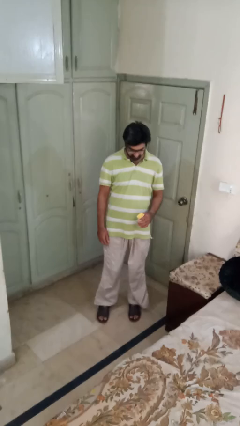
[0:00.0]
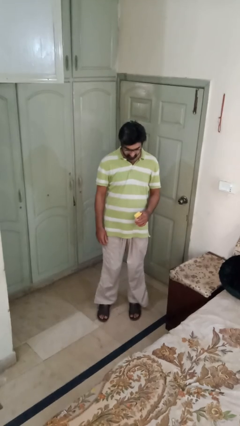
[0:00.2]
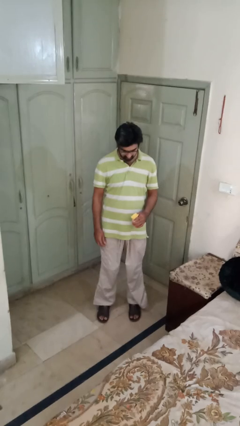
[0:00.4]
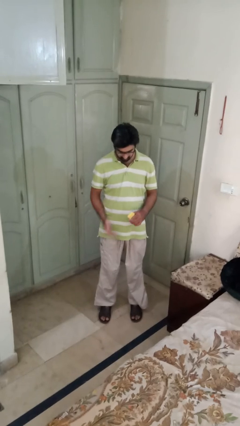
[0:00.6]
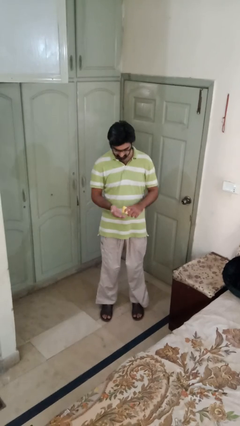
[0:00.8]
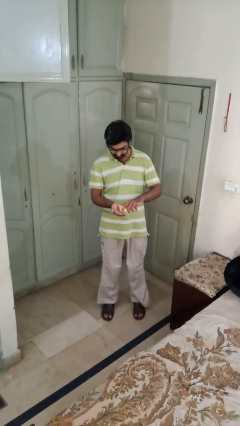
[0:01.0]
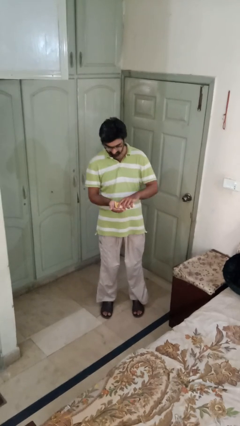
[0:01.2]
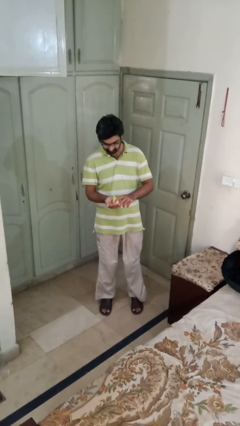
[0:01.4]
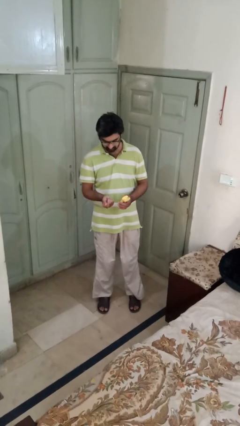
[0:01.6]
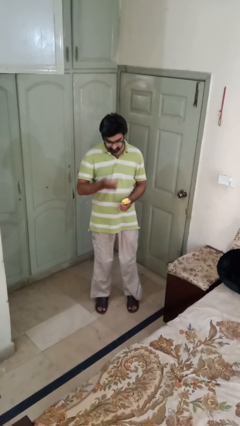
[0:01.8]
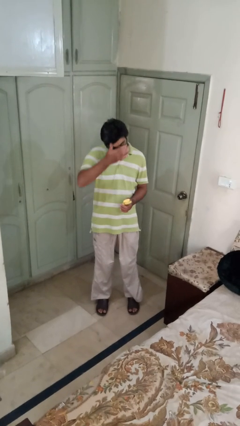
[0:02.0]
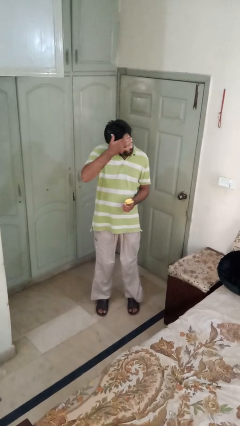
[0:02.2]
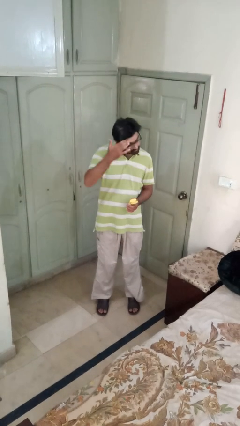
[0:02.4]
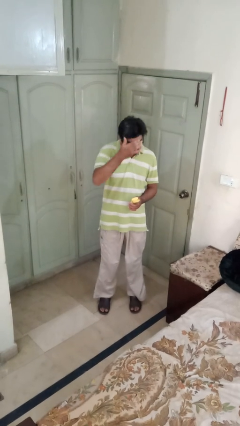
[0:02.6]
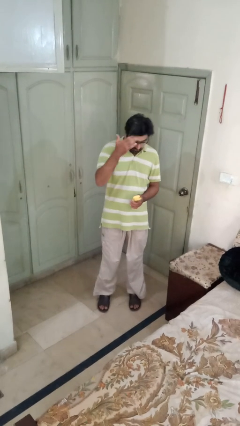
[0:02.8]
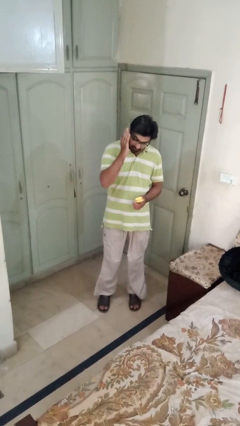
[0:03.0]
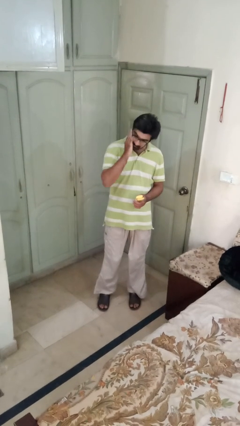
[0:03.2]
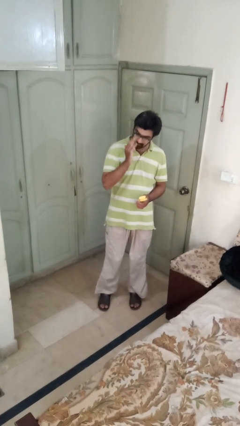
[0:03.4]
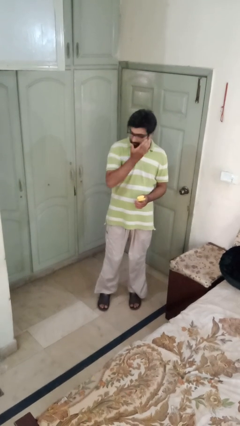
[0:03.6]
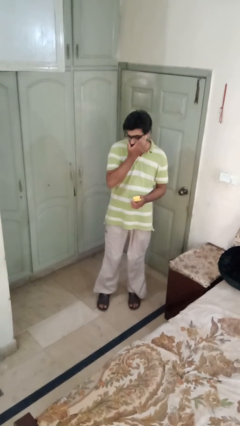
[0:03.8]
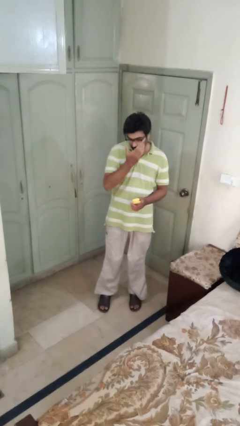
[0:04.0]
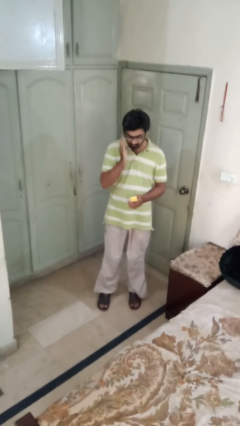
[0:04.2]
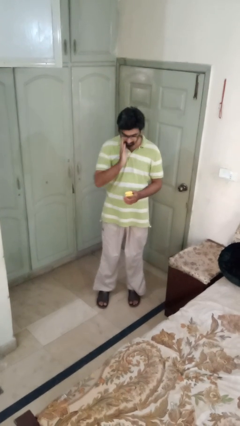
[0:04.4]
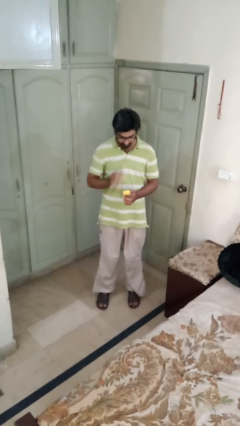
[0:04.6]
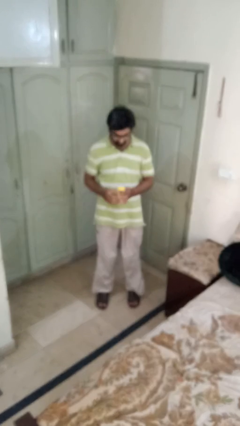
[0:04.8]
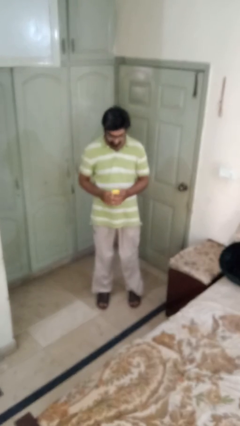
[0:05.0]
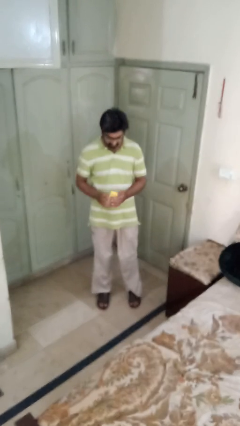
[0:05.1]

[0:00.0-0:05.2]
person applies facial moisturizer

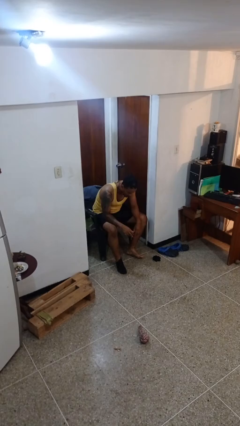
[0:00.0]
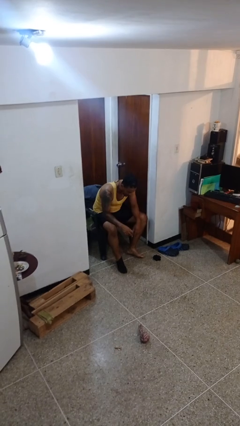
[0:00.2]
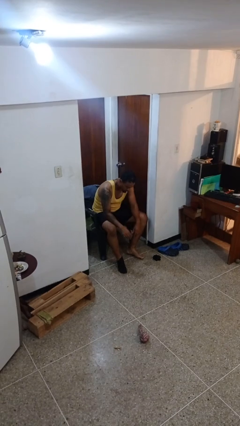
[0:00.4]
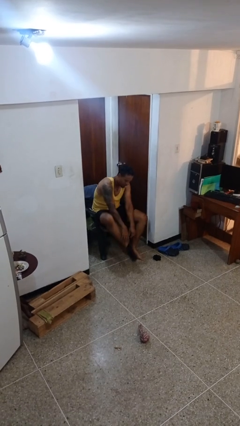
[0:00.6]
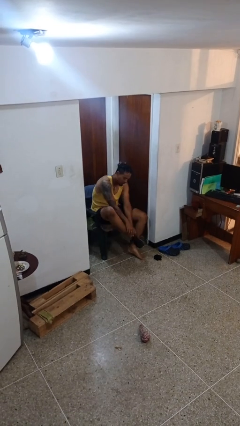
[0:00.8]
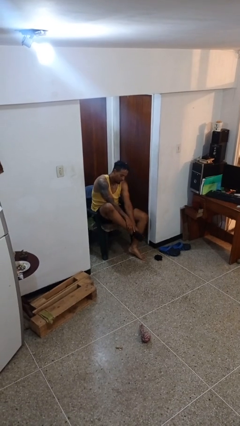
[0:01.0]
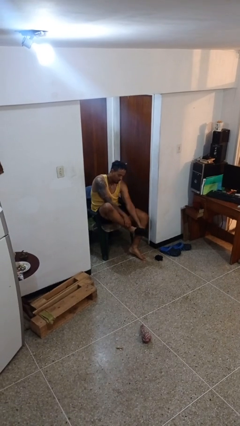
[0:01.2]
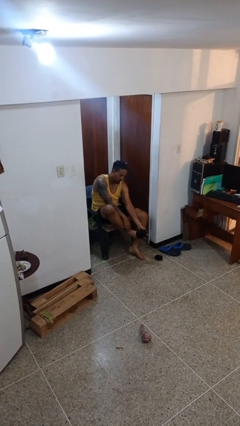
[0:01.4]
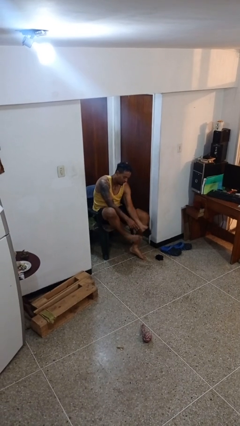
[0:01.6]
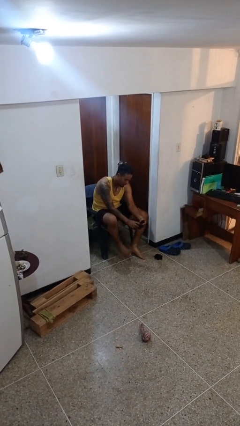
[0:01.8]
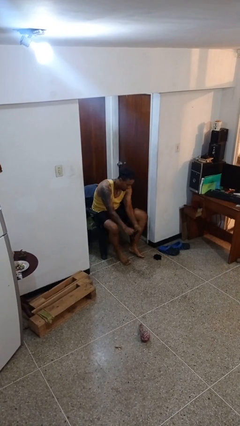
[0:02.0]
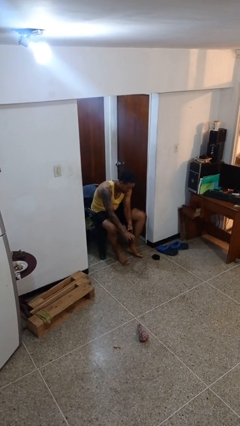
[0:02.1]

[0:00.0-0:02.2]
person takes off socks

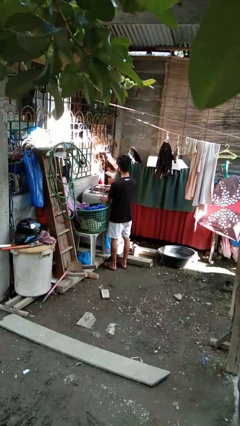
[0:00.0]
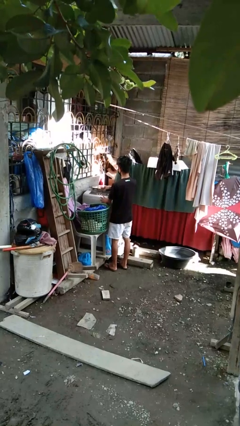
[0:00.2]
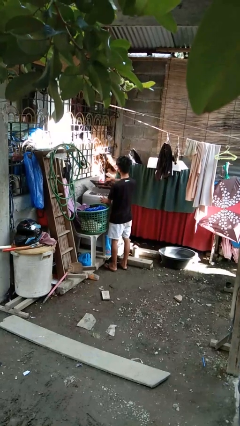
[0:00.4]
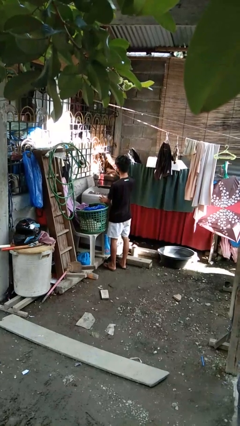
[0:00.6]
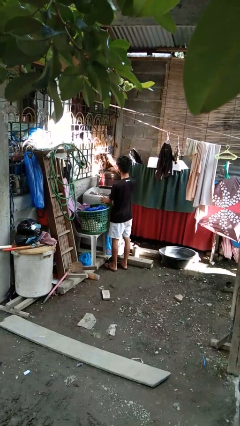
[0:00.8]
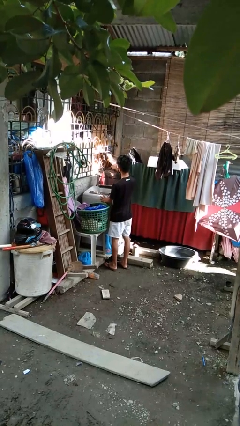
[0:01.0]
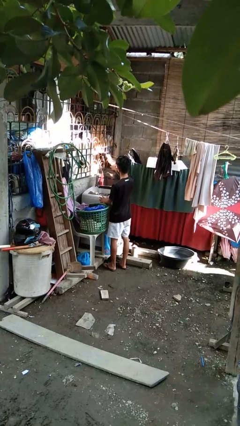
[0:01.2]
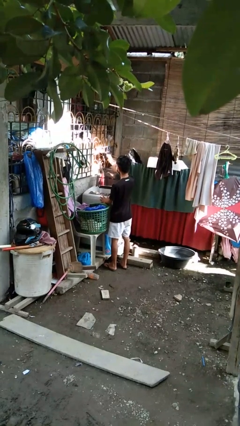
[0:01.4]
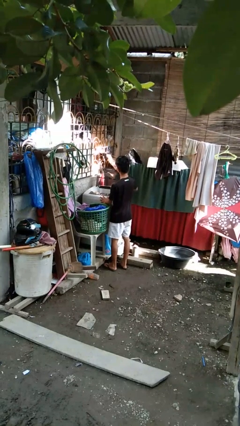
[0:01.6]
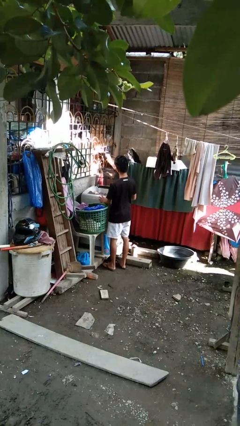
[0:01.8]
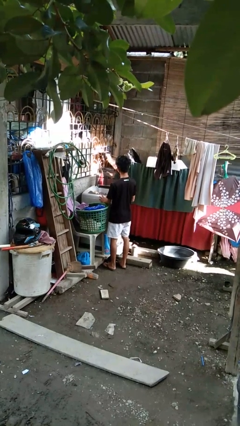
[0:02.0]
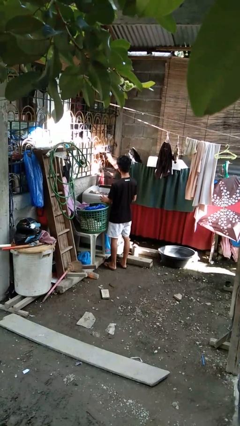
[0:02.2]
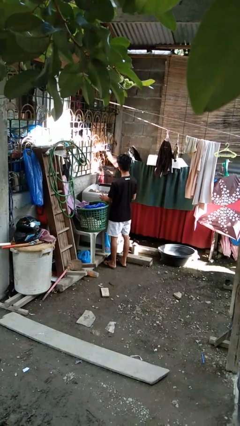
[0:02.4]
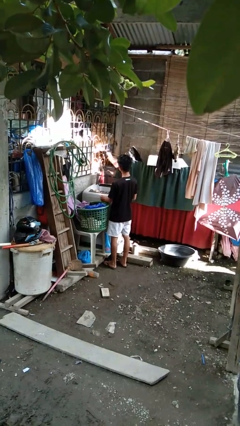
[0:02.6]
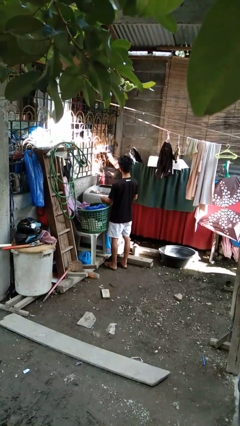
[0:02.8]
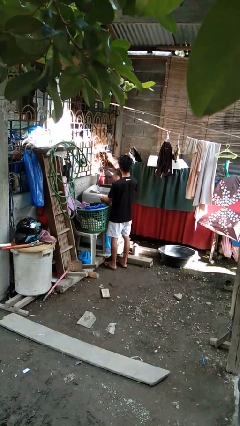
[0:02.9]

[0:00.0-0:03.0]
person opens clothes washer

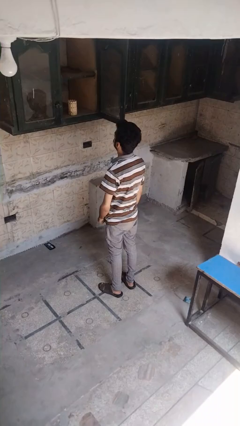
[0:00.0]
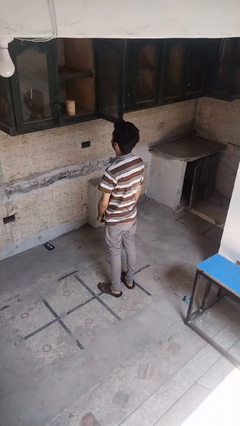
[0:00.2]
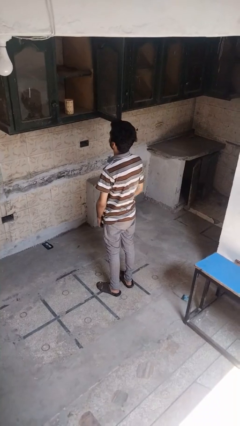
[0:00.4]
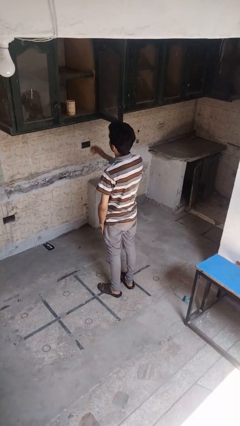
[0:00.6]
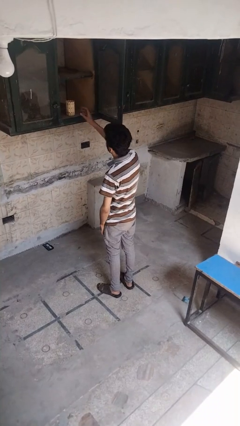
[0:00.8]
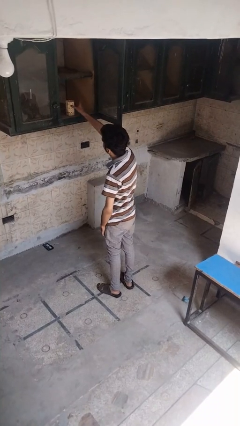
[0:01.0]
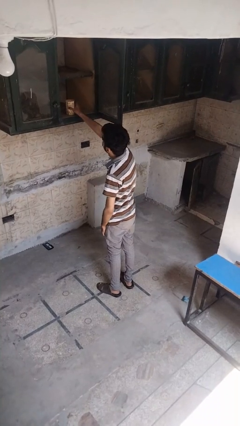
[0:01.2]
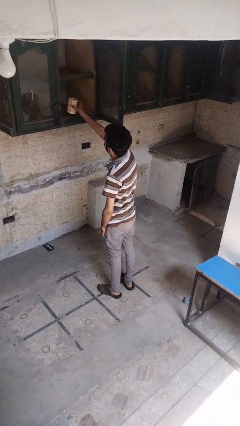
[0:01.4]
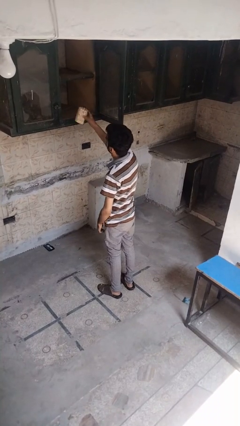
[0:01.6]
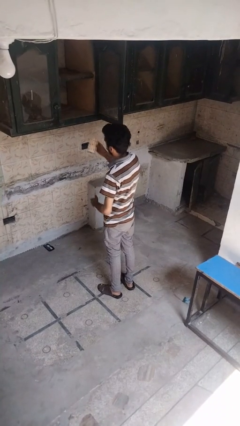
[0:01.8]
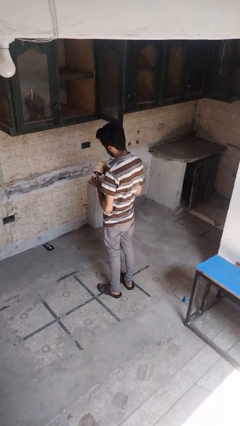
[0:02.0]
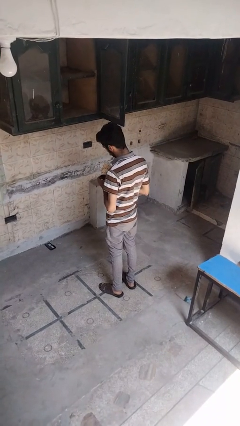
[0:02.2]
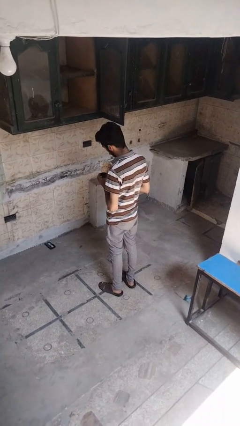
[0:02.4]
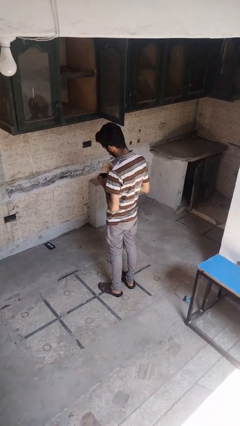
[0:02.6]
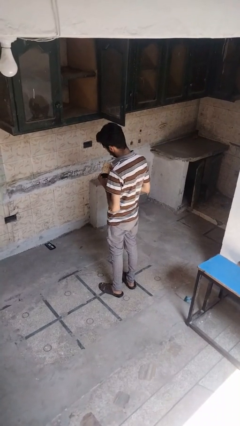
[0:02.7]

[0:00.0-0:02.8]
person picks up object from cabinet

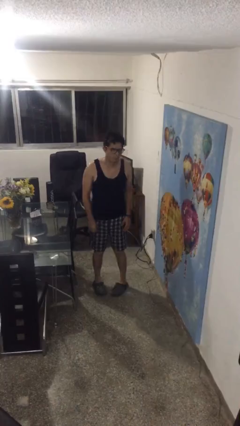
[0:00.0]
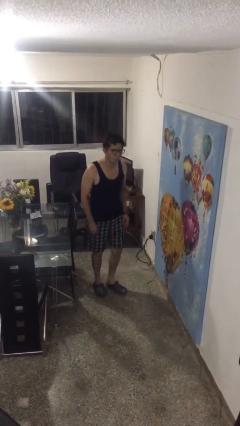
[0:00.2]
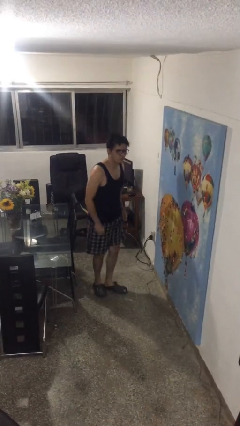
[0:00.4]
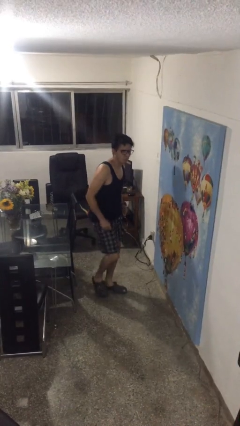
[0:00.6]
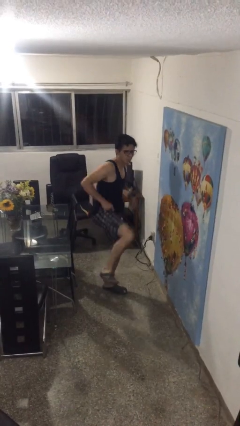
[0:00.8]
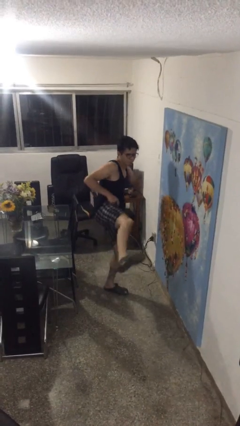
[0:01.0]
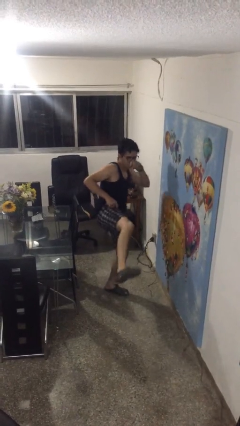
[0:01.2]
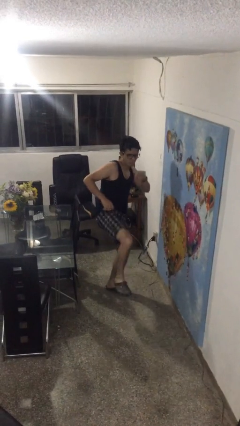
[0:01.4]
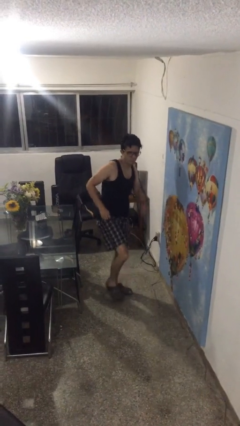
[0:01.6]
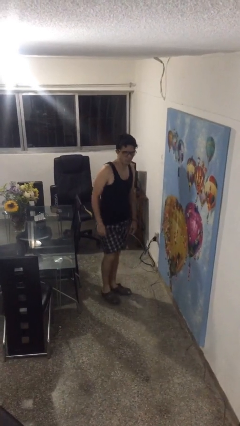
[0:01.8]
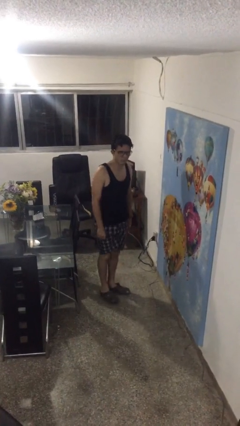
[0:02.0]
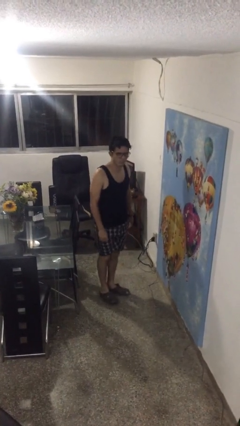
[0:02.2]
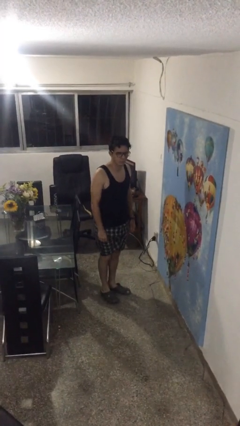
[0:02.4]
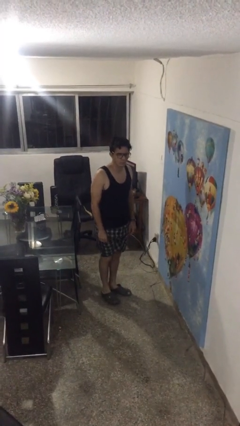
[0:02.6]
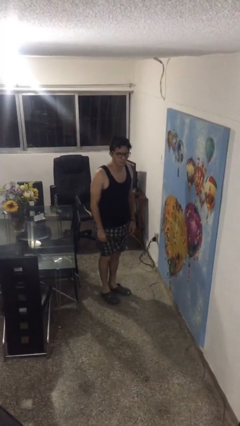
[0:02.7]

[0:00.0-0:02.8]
person karate kicks

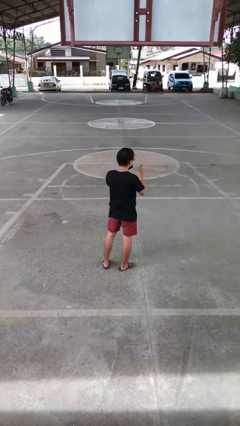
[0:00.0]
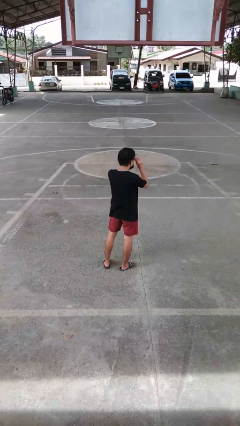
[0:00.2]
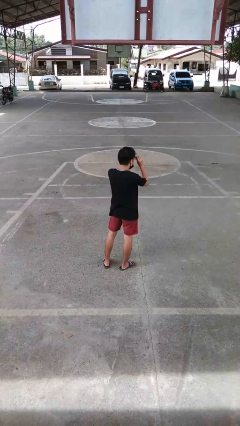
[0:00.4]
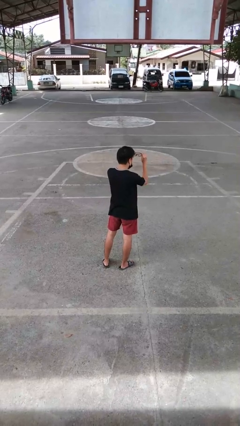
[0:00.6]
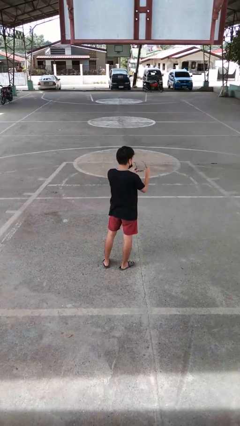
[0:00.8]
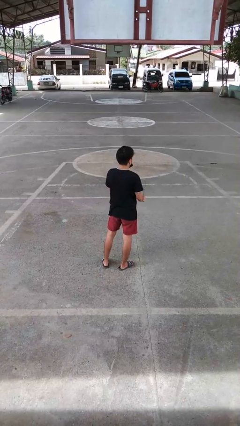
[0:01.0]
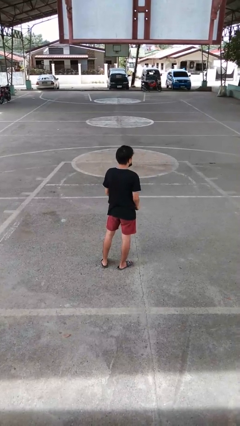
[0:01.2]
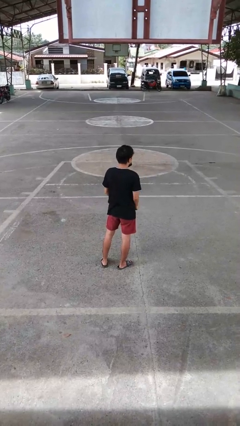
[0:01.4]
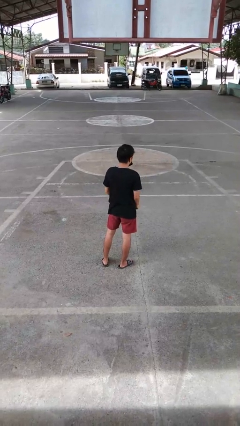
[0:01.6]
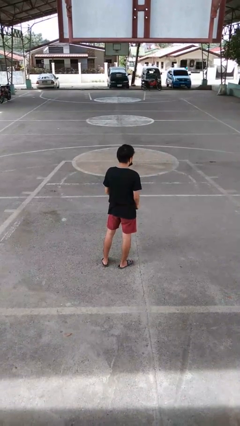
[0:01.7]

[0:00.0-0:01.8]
person takes off glasses

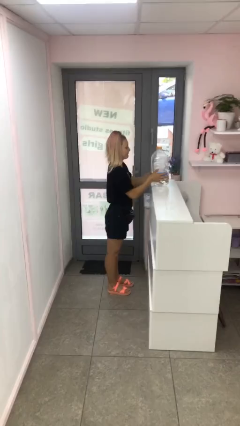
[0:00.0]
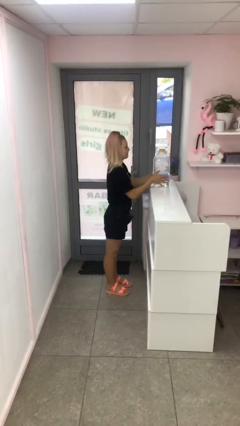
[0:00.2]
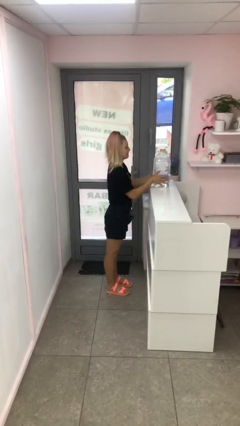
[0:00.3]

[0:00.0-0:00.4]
person puts down object on countertop
